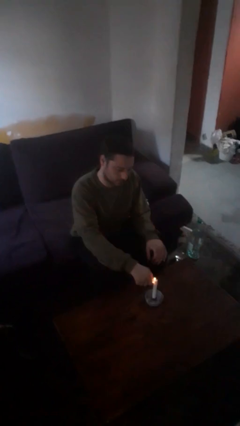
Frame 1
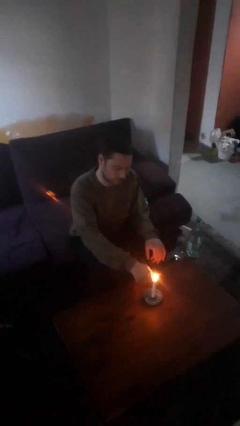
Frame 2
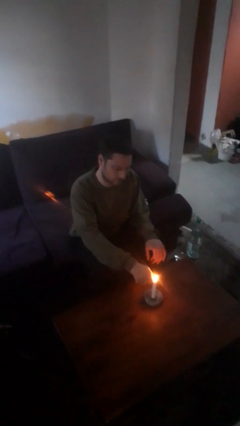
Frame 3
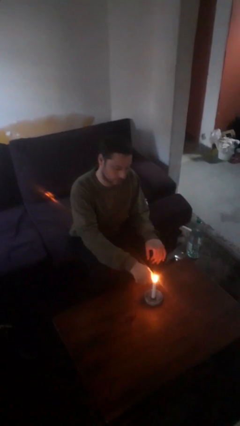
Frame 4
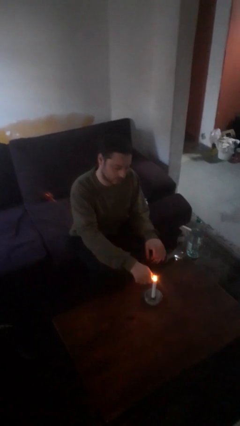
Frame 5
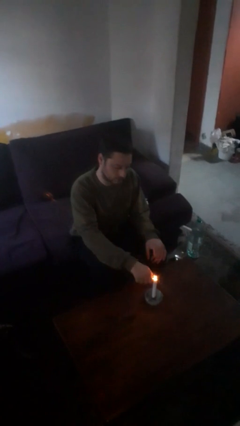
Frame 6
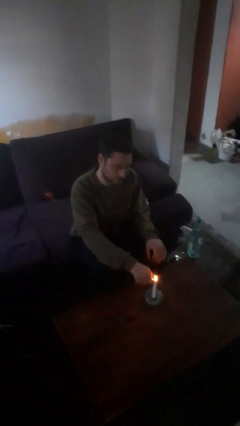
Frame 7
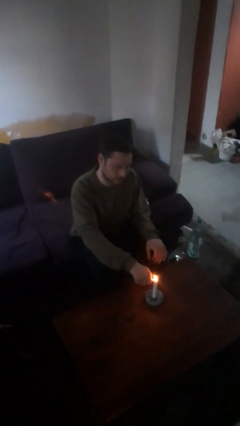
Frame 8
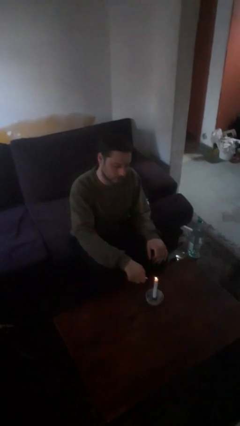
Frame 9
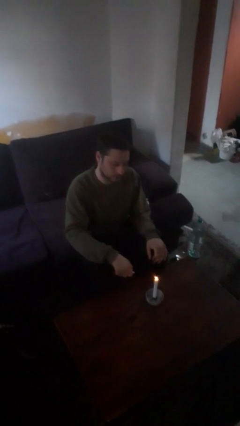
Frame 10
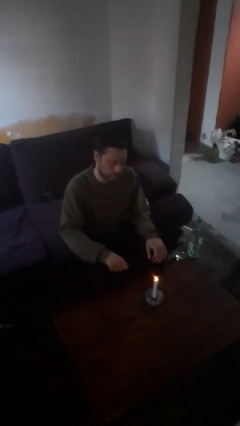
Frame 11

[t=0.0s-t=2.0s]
person lights candle

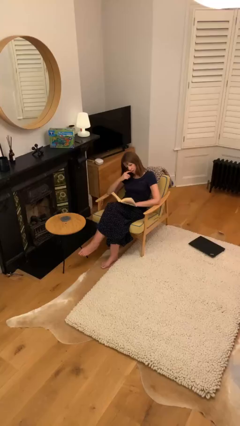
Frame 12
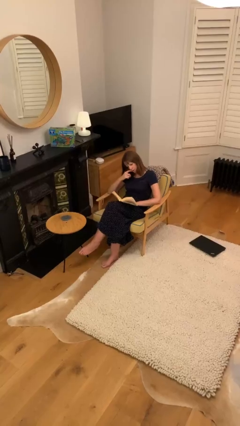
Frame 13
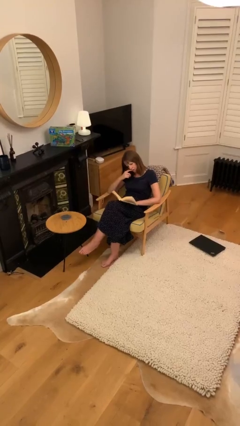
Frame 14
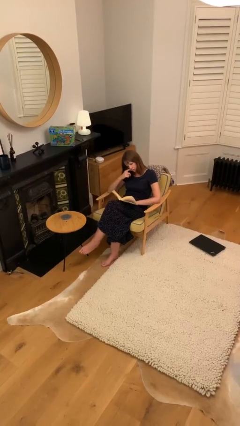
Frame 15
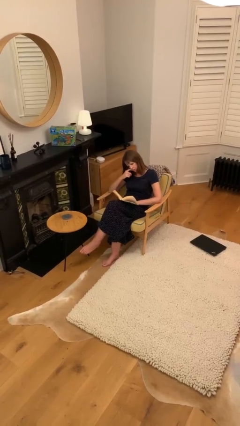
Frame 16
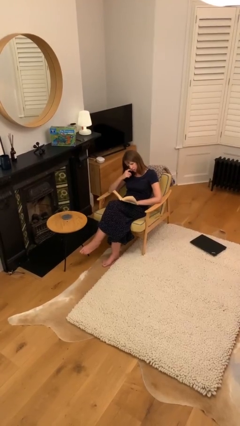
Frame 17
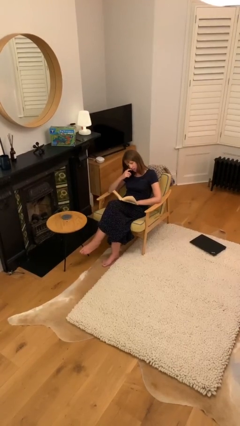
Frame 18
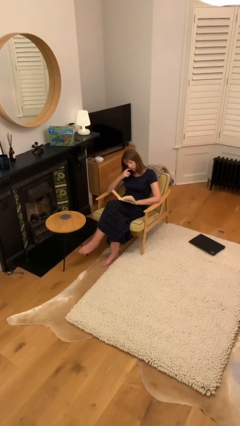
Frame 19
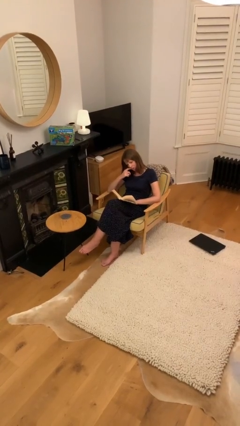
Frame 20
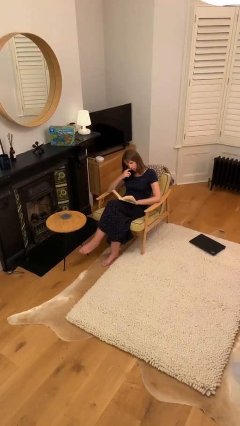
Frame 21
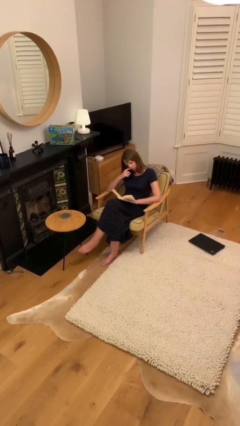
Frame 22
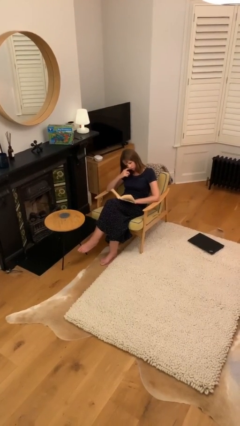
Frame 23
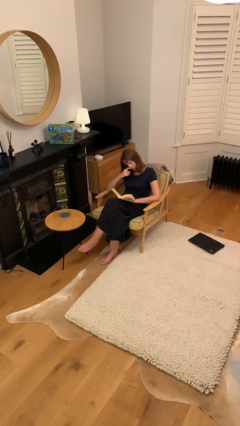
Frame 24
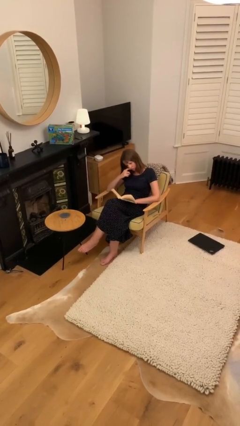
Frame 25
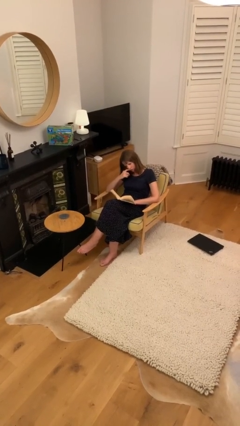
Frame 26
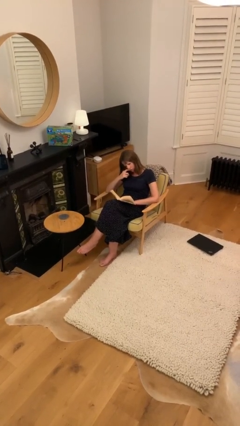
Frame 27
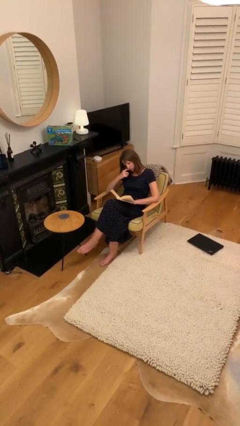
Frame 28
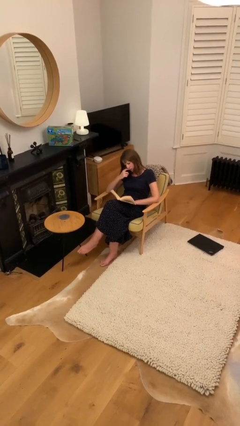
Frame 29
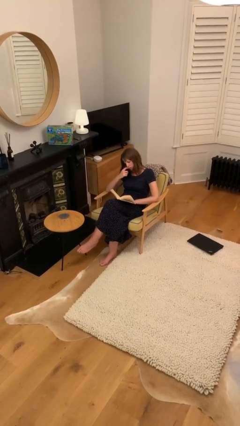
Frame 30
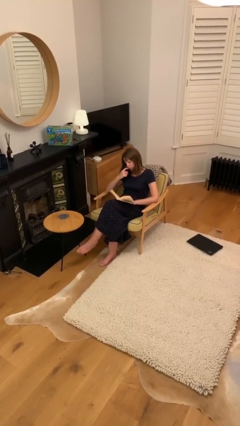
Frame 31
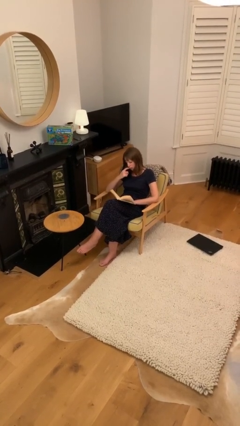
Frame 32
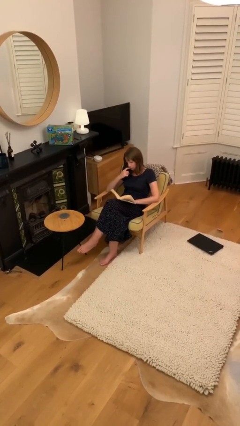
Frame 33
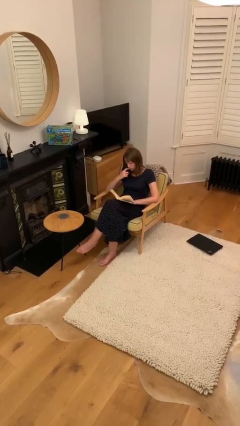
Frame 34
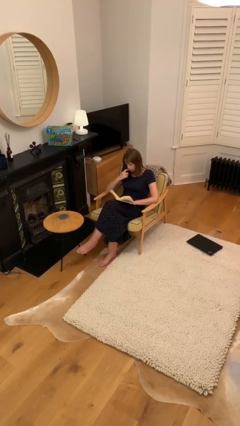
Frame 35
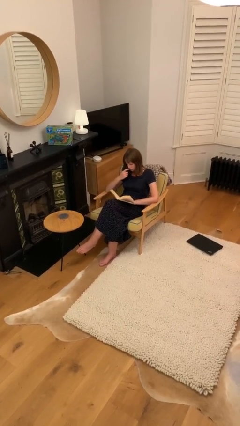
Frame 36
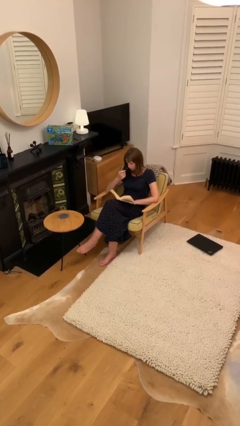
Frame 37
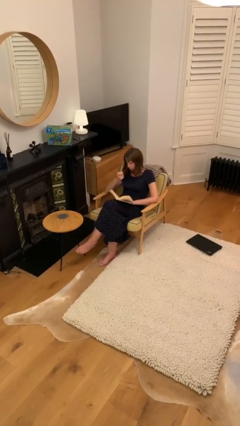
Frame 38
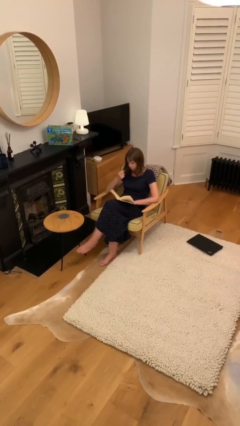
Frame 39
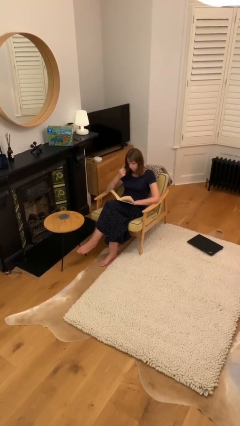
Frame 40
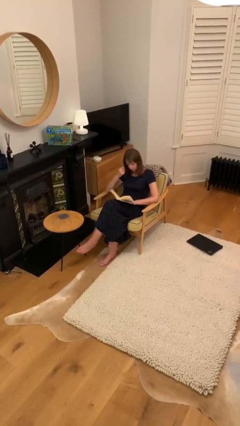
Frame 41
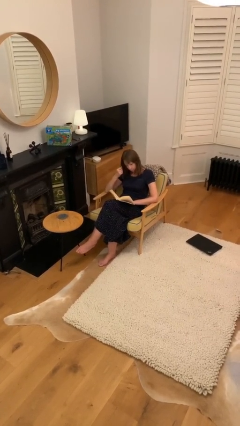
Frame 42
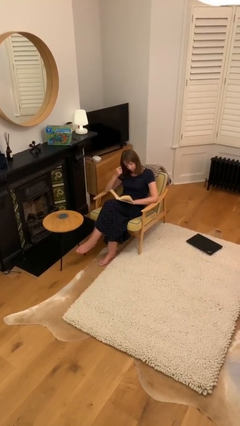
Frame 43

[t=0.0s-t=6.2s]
person reads document

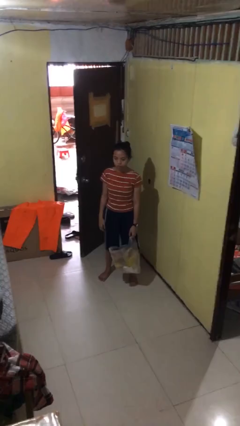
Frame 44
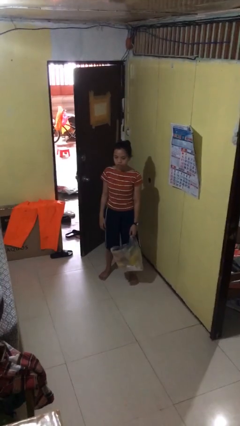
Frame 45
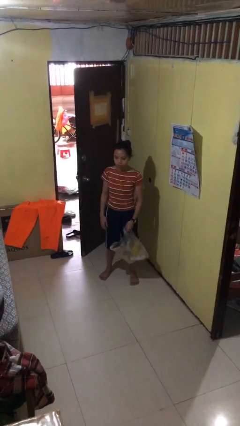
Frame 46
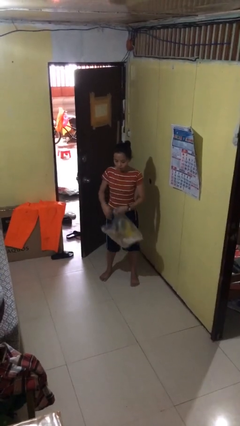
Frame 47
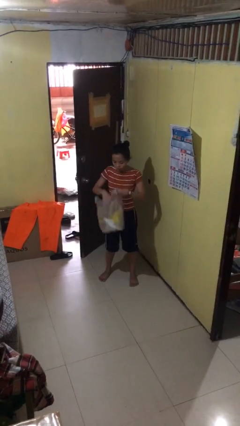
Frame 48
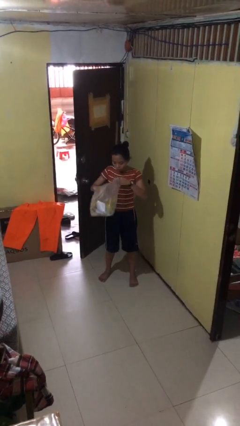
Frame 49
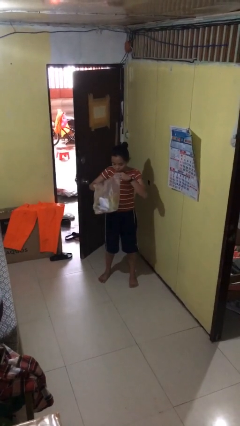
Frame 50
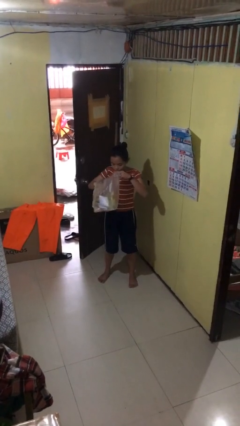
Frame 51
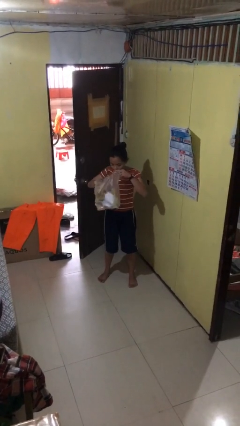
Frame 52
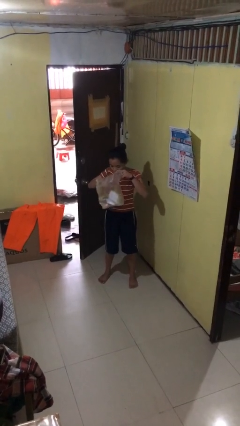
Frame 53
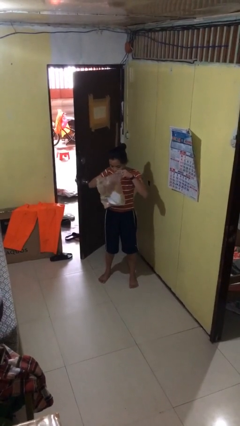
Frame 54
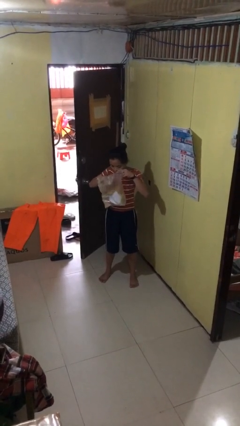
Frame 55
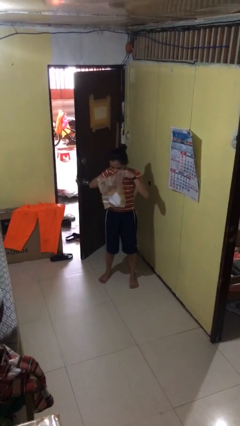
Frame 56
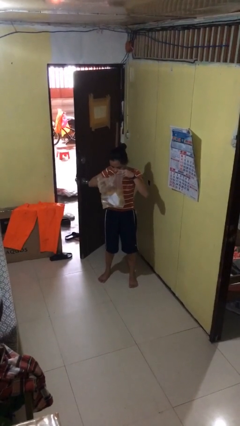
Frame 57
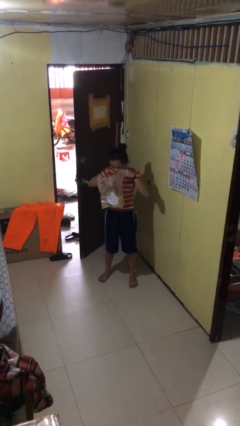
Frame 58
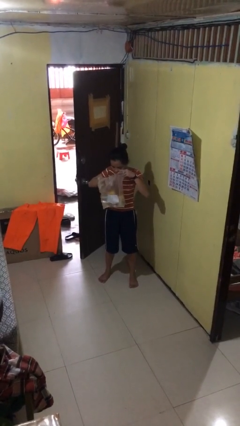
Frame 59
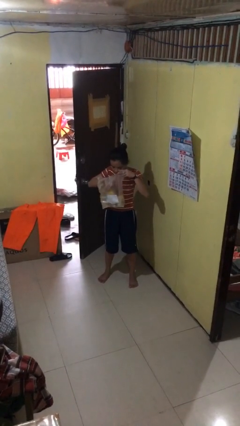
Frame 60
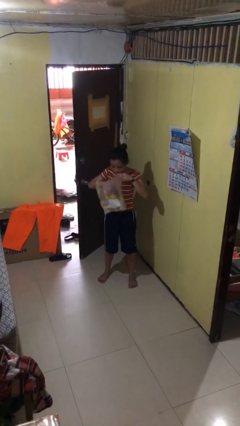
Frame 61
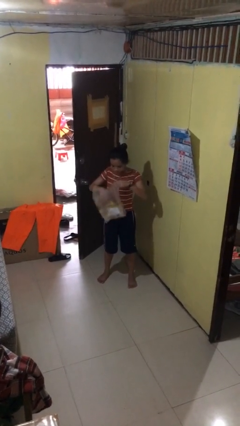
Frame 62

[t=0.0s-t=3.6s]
person searches in bag

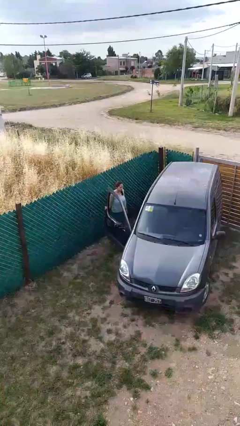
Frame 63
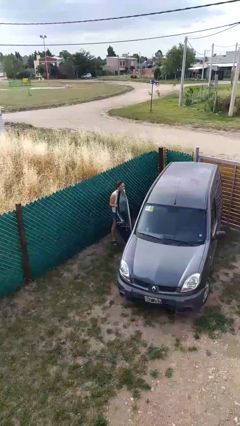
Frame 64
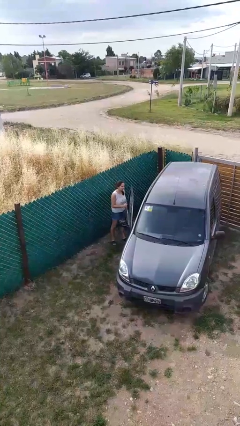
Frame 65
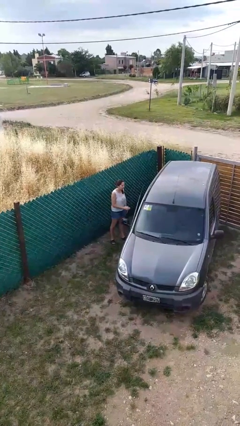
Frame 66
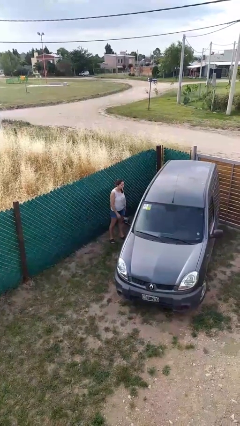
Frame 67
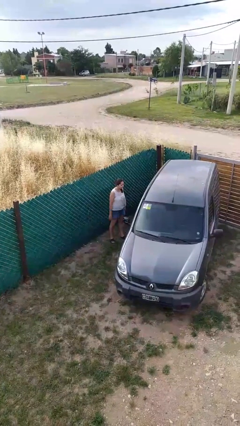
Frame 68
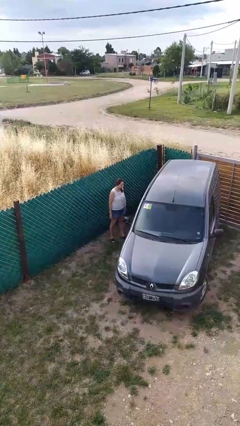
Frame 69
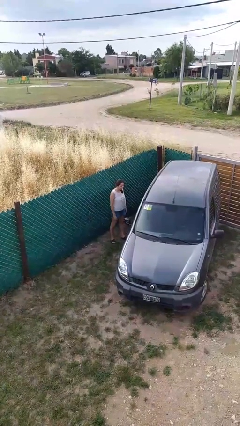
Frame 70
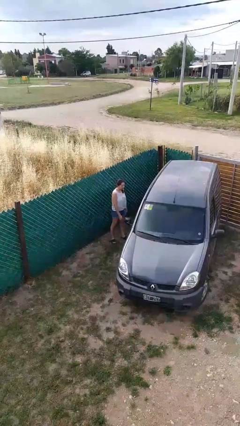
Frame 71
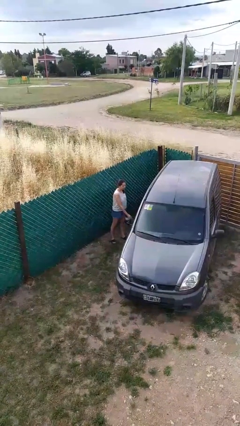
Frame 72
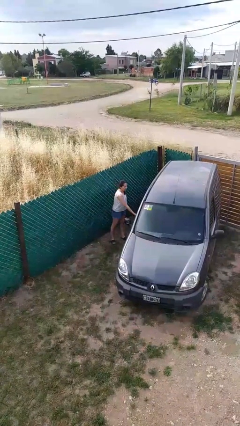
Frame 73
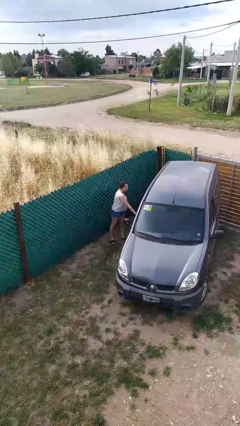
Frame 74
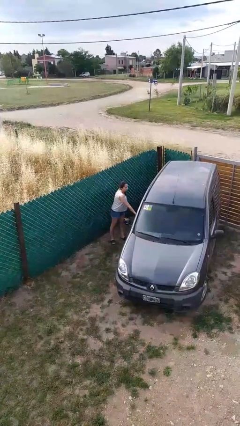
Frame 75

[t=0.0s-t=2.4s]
person closes car door

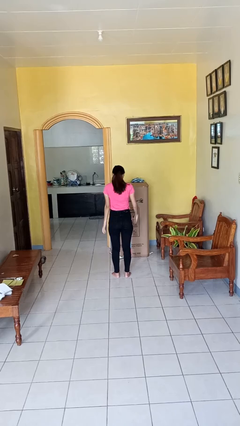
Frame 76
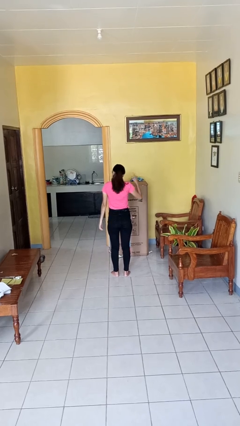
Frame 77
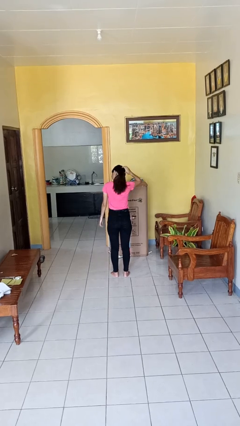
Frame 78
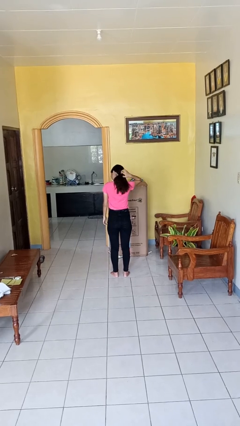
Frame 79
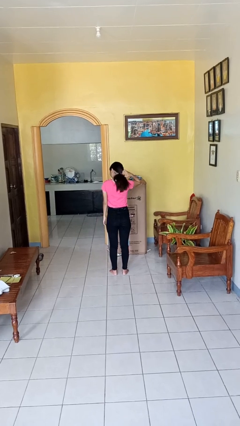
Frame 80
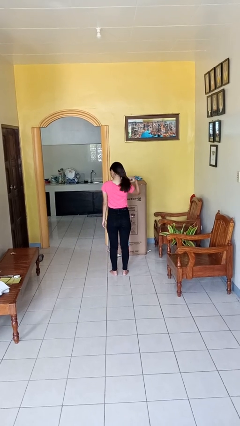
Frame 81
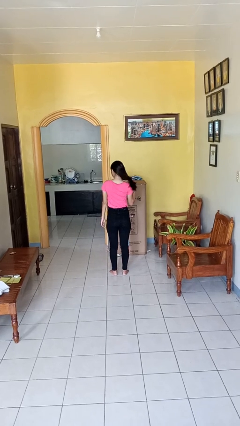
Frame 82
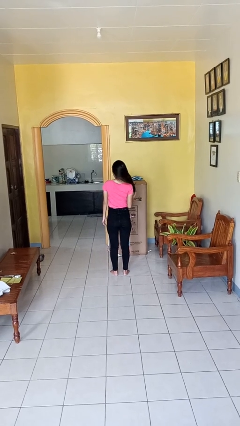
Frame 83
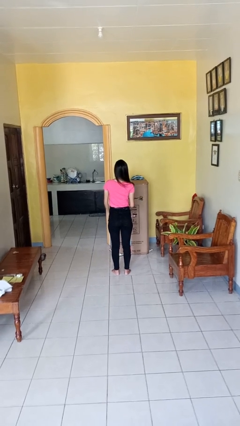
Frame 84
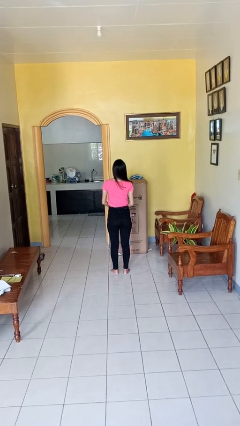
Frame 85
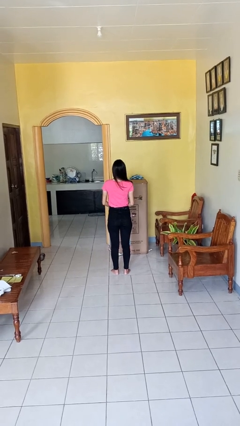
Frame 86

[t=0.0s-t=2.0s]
person takes off hairtie

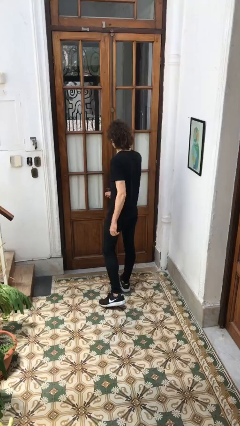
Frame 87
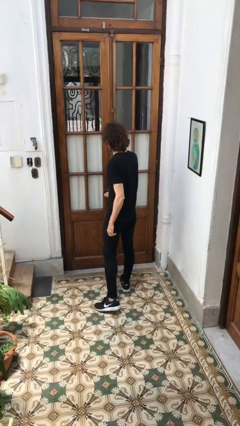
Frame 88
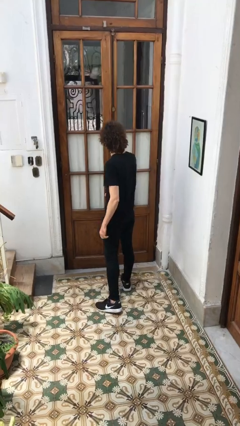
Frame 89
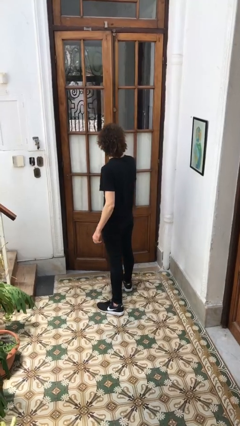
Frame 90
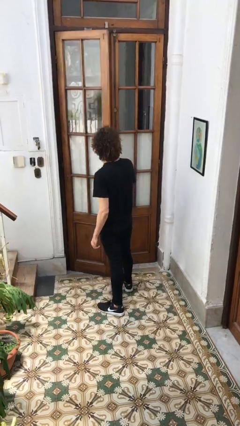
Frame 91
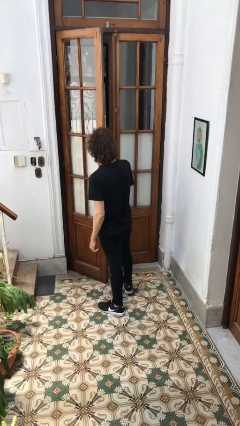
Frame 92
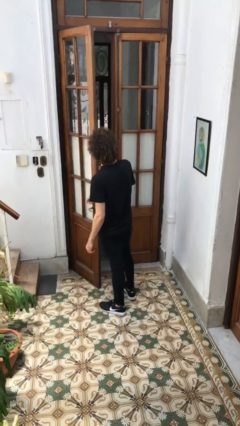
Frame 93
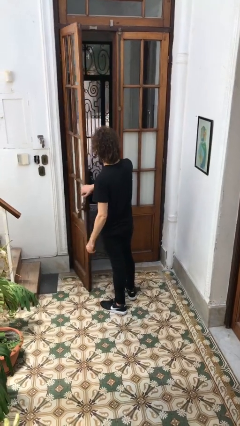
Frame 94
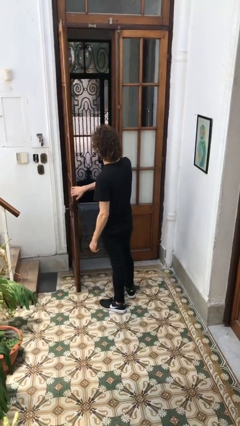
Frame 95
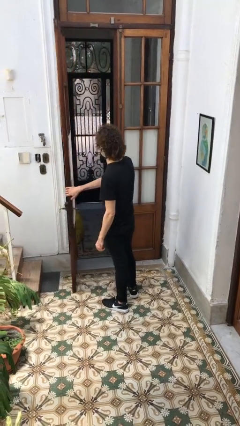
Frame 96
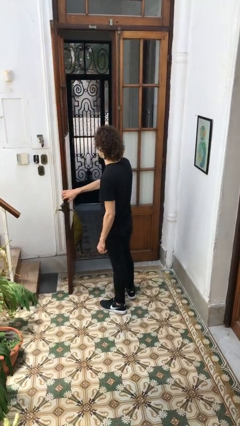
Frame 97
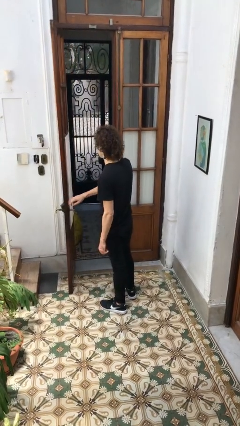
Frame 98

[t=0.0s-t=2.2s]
person opens facility door
